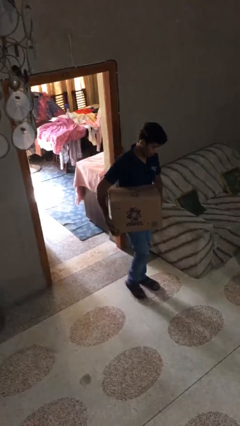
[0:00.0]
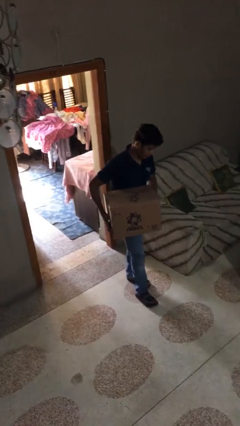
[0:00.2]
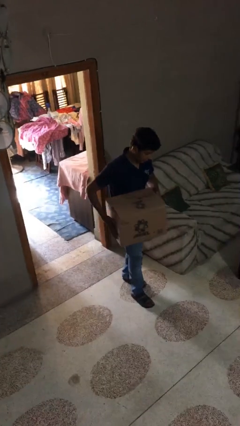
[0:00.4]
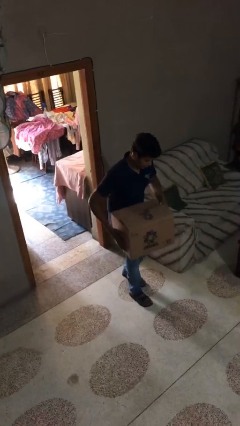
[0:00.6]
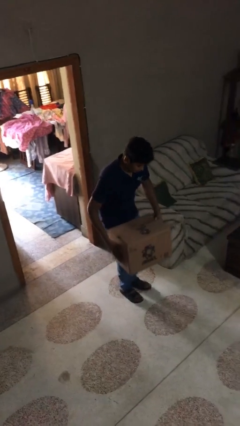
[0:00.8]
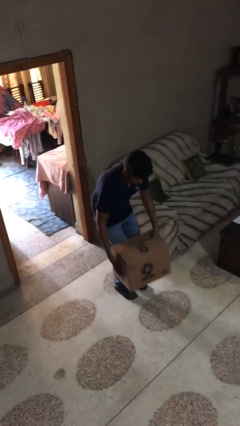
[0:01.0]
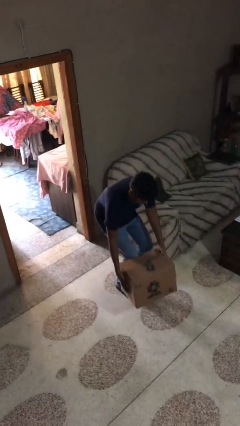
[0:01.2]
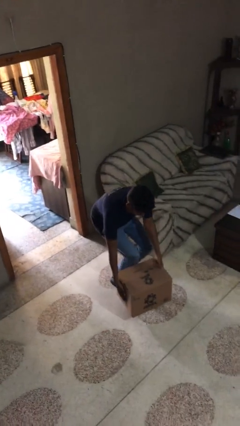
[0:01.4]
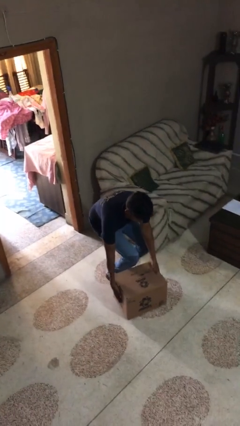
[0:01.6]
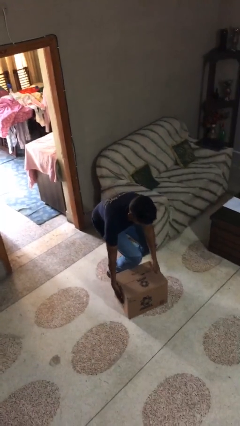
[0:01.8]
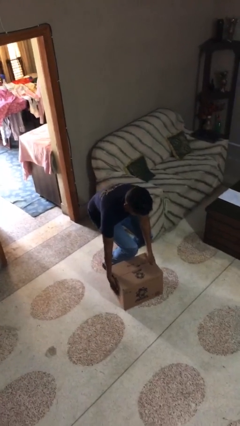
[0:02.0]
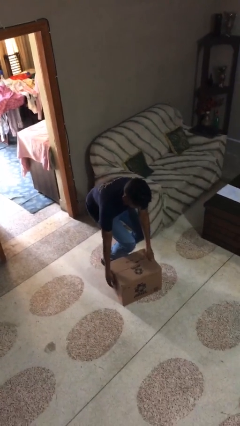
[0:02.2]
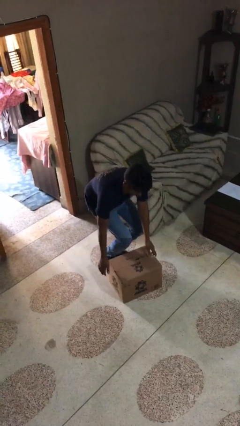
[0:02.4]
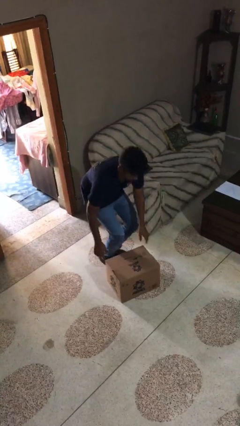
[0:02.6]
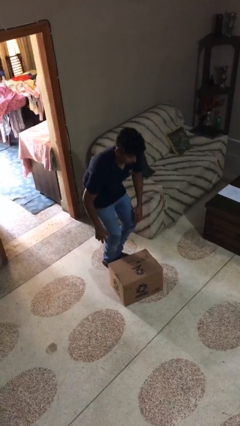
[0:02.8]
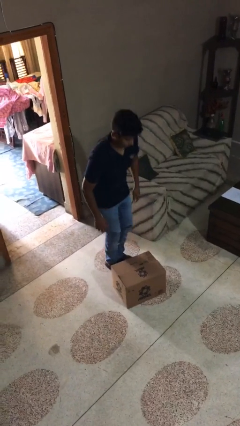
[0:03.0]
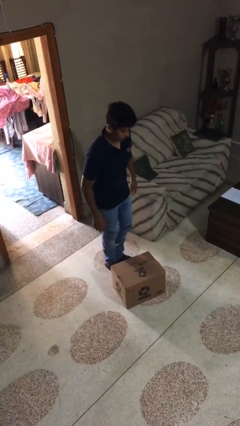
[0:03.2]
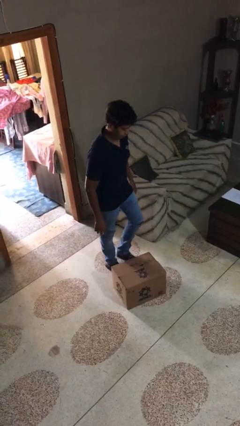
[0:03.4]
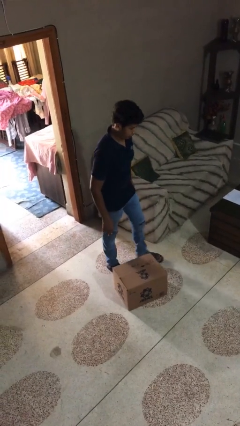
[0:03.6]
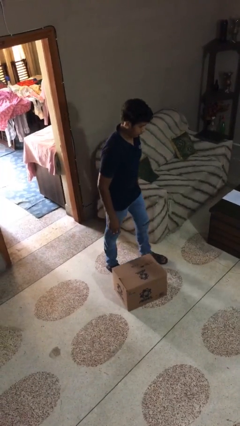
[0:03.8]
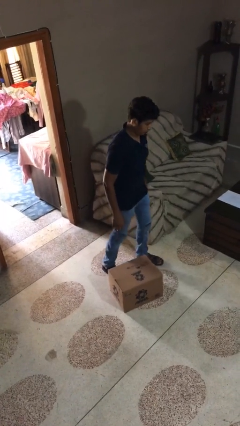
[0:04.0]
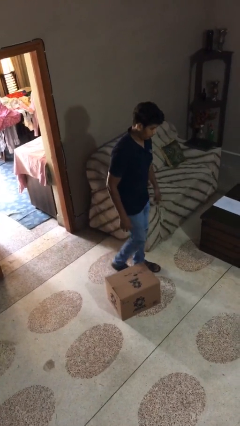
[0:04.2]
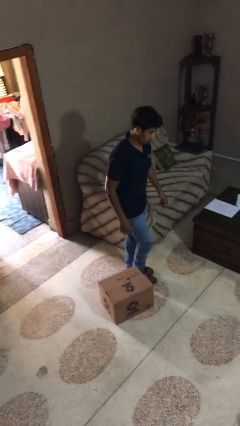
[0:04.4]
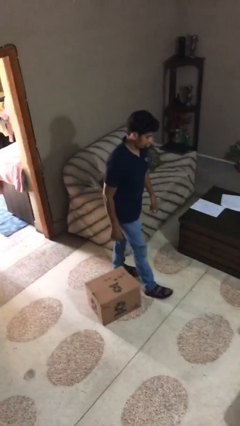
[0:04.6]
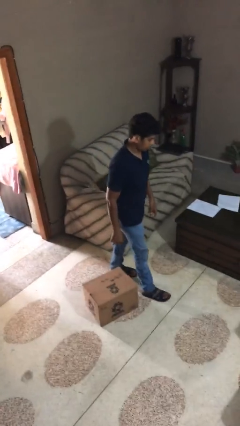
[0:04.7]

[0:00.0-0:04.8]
person puts down object on floor

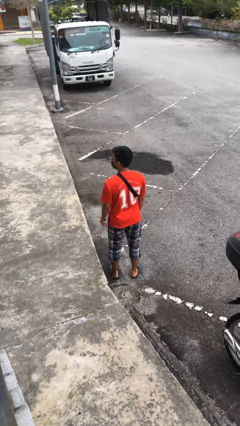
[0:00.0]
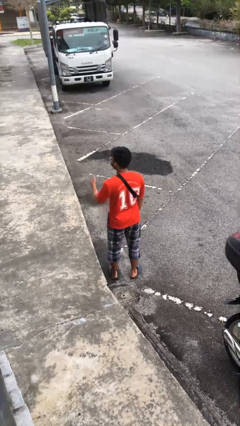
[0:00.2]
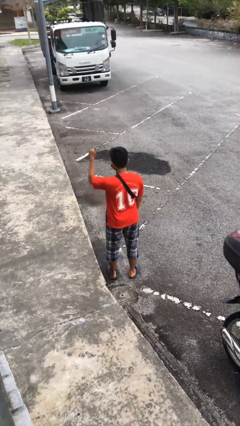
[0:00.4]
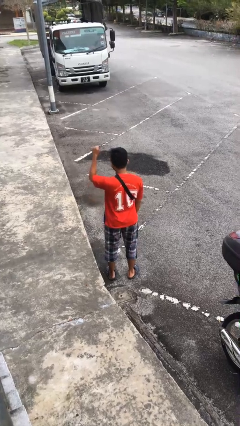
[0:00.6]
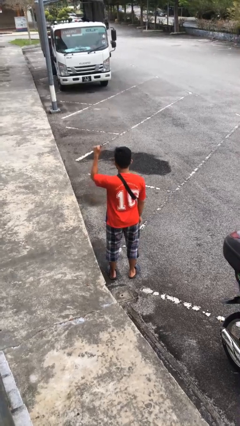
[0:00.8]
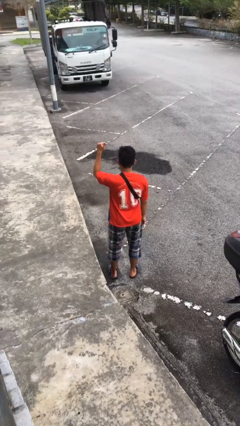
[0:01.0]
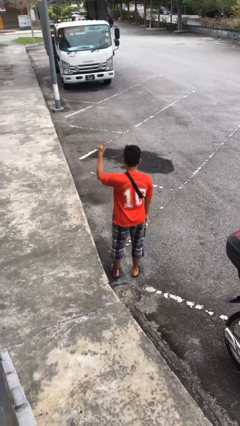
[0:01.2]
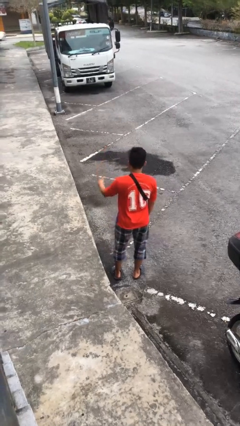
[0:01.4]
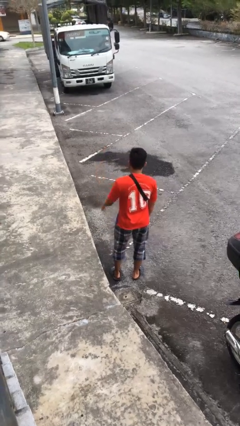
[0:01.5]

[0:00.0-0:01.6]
person gestures thumbs up

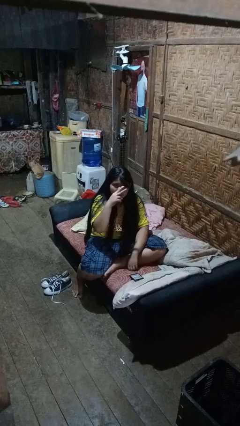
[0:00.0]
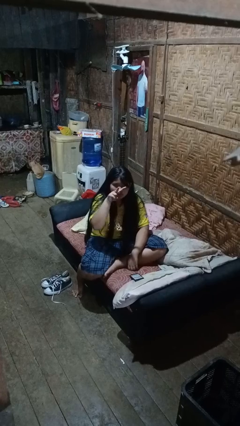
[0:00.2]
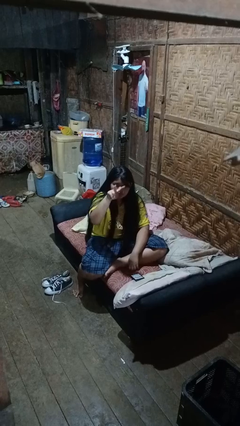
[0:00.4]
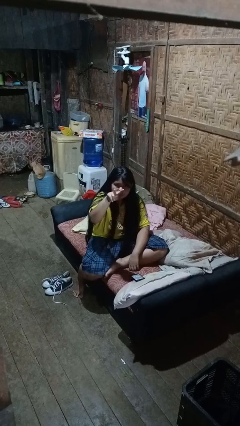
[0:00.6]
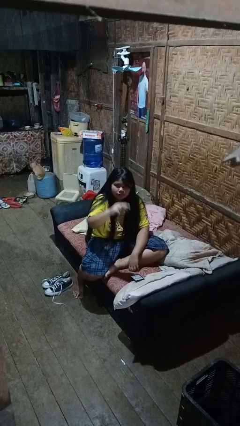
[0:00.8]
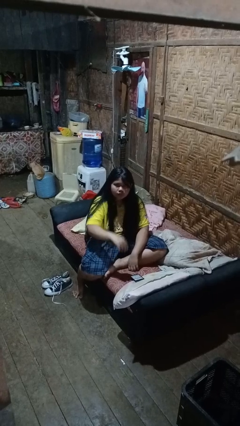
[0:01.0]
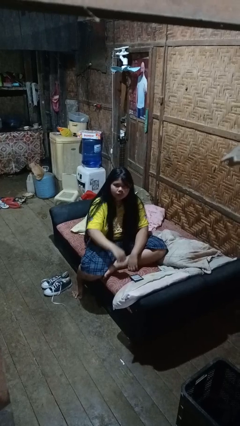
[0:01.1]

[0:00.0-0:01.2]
person gestures watch closely

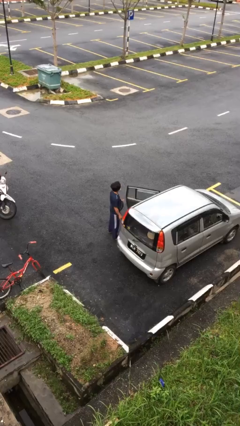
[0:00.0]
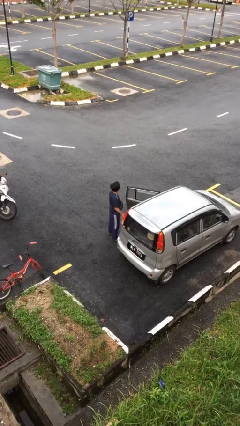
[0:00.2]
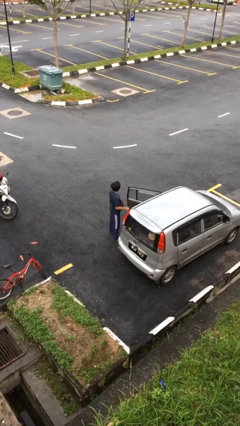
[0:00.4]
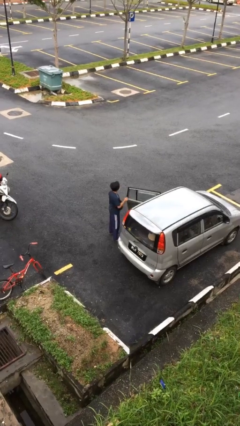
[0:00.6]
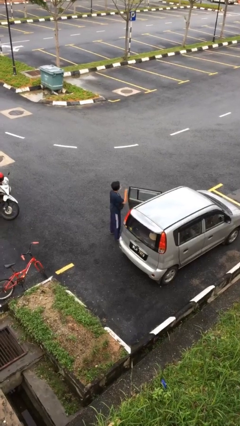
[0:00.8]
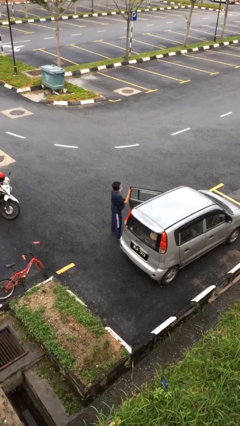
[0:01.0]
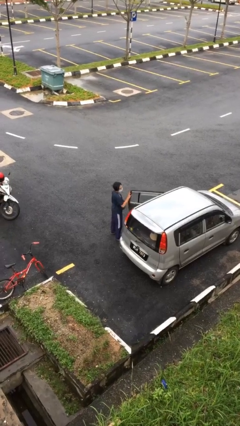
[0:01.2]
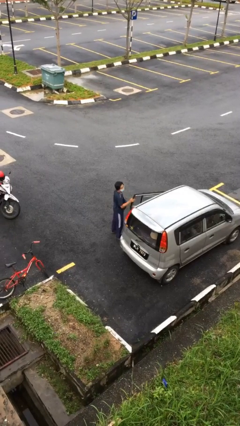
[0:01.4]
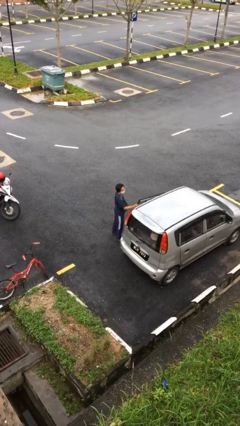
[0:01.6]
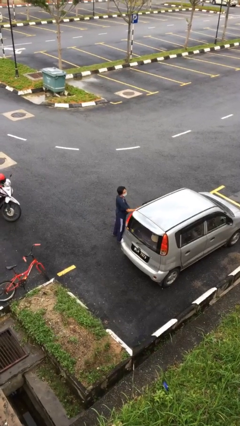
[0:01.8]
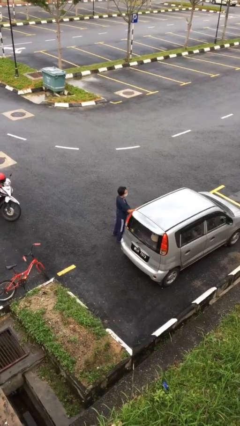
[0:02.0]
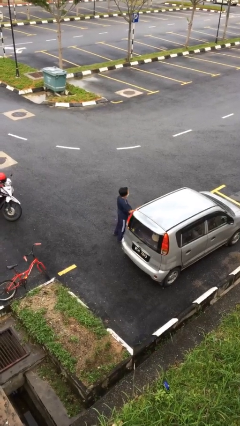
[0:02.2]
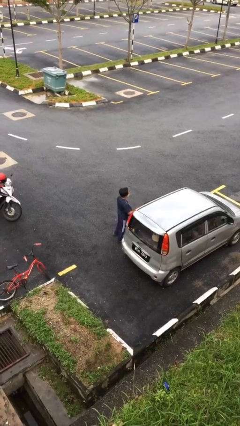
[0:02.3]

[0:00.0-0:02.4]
person closes car door

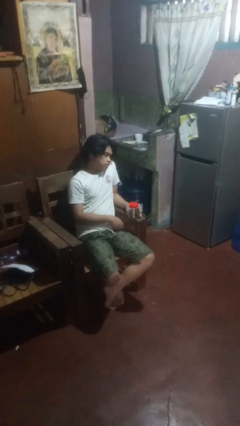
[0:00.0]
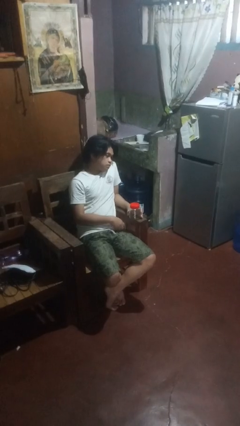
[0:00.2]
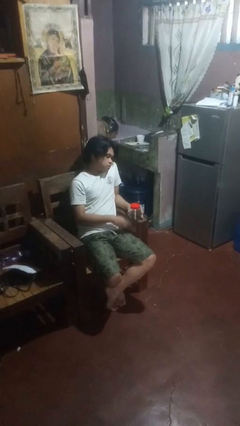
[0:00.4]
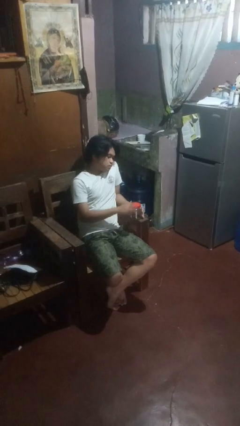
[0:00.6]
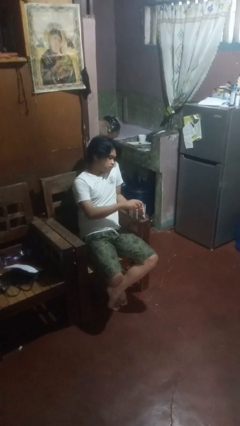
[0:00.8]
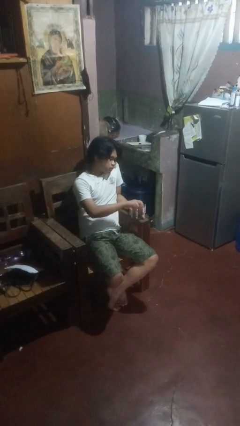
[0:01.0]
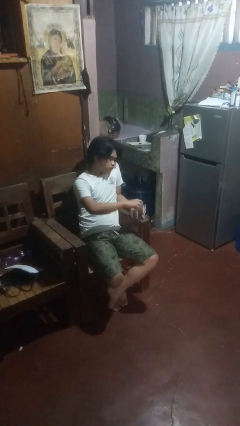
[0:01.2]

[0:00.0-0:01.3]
person opens jar

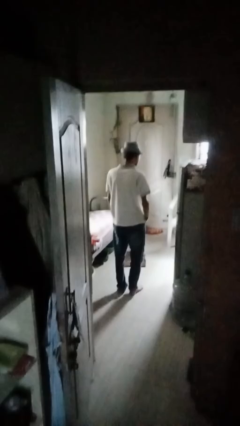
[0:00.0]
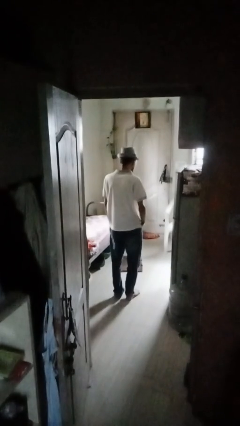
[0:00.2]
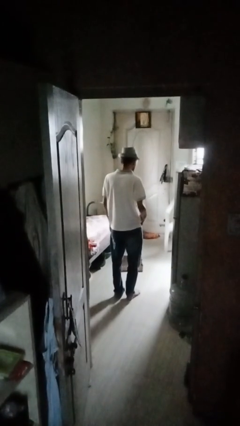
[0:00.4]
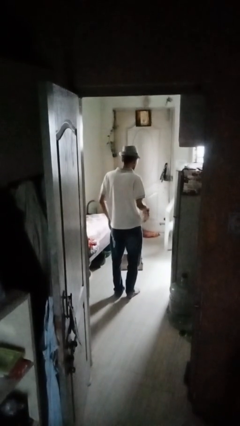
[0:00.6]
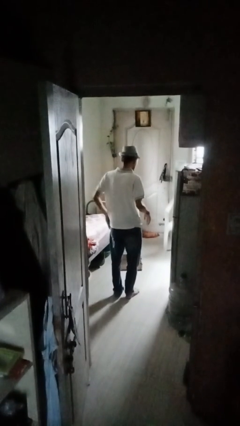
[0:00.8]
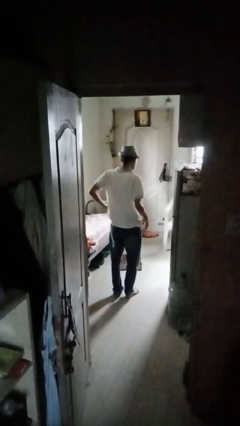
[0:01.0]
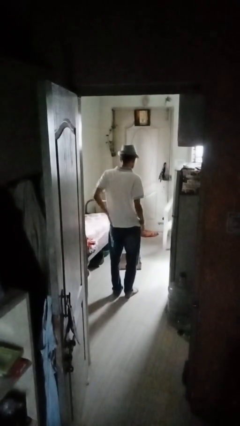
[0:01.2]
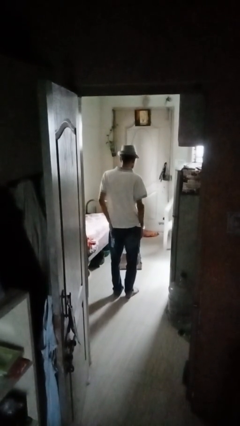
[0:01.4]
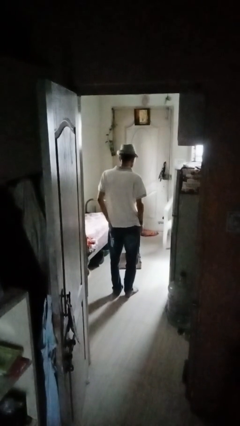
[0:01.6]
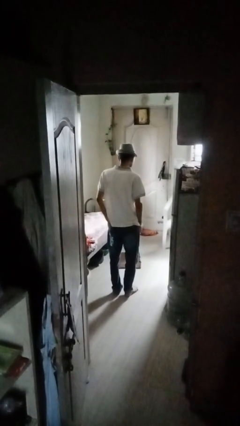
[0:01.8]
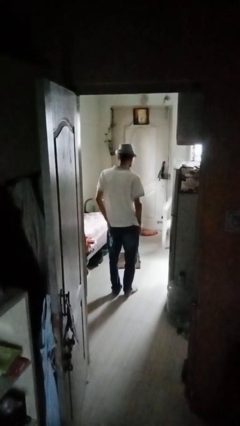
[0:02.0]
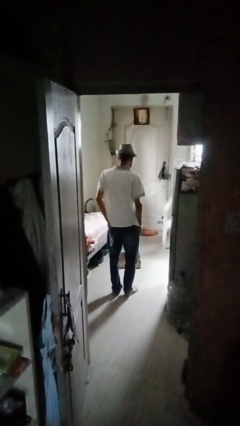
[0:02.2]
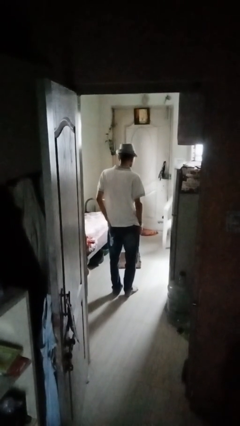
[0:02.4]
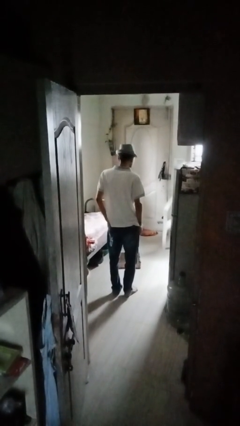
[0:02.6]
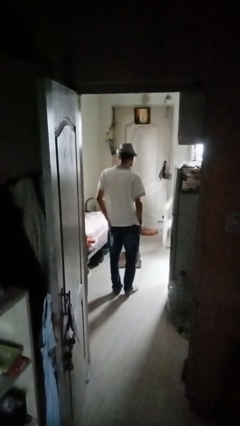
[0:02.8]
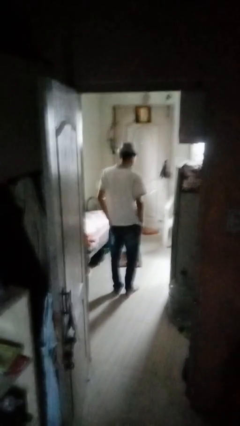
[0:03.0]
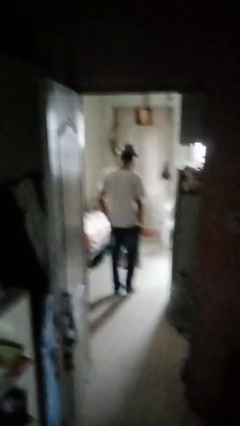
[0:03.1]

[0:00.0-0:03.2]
person puts hands in back pockets

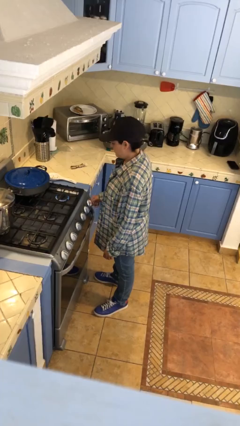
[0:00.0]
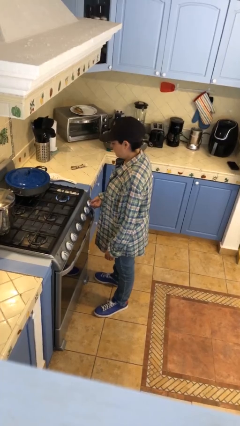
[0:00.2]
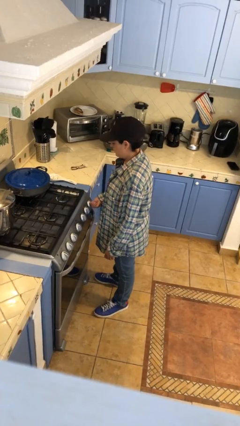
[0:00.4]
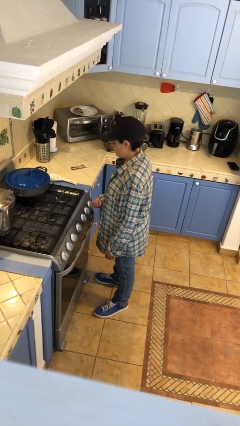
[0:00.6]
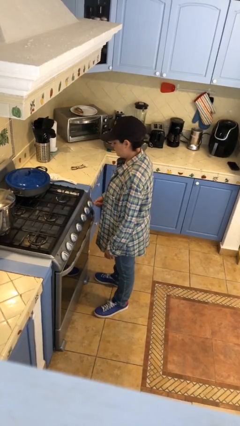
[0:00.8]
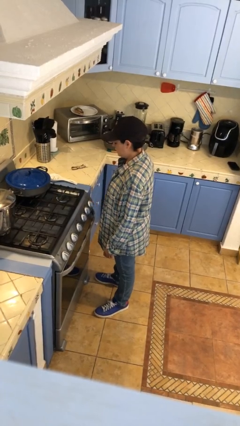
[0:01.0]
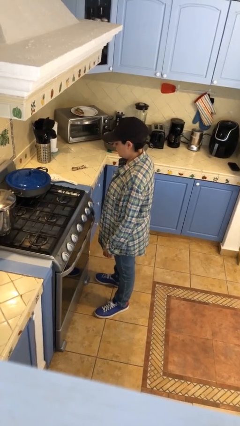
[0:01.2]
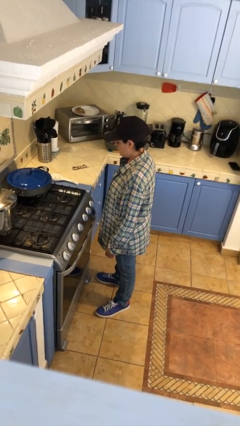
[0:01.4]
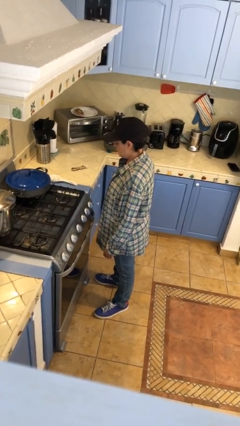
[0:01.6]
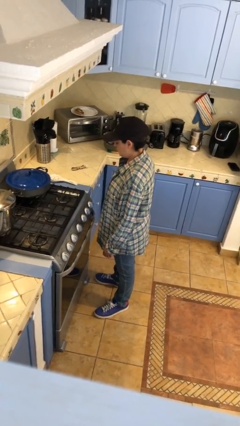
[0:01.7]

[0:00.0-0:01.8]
person turns off stovetop

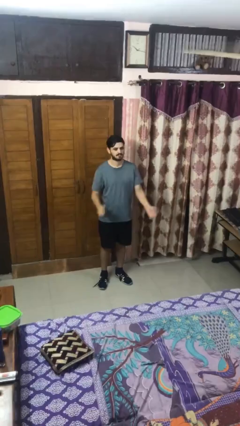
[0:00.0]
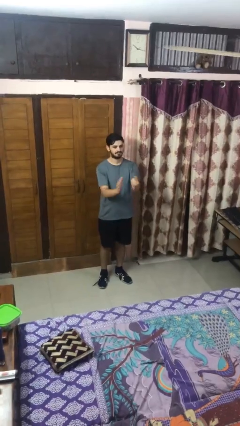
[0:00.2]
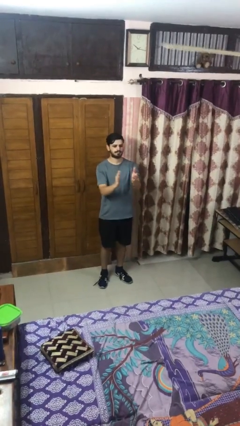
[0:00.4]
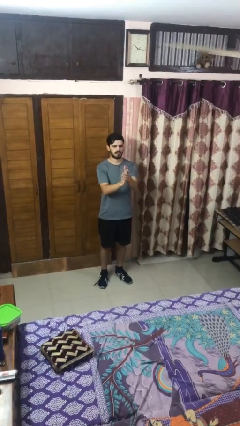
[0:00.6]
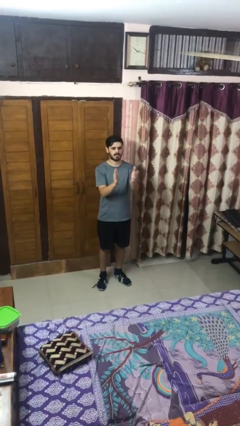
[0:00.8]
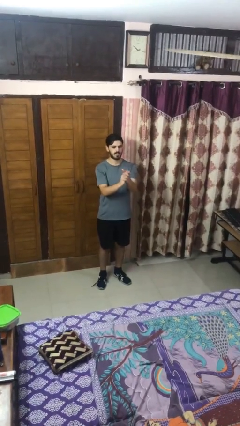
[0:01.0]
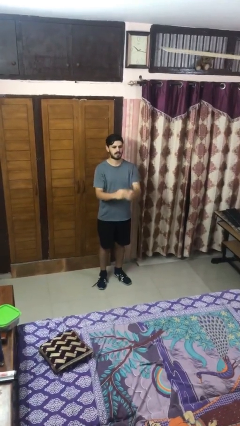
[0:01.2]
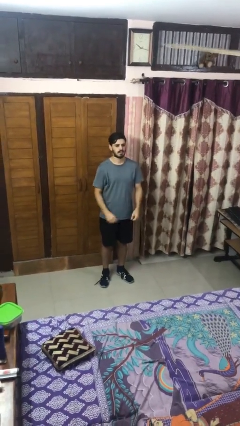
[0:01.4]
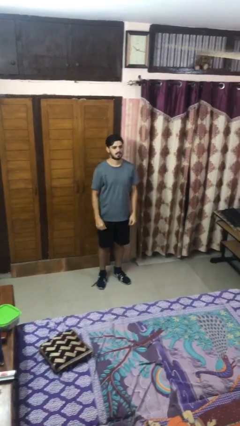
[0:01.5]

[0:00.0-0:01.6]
person claps hands
